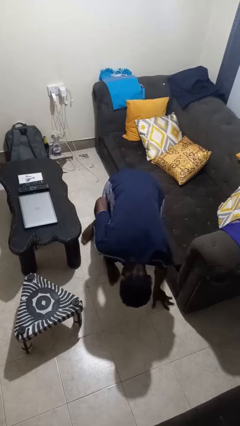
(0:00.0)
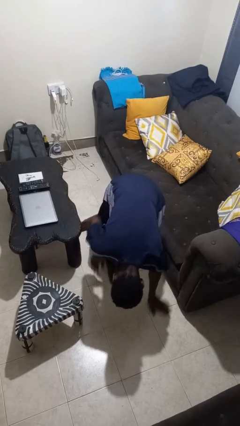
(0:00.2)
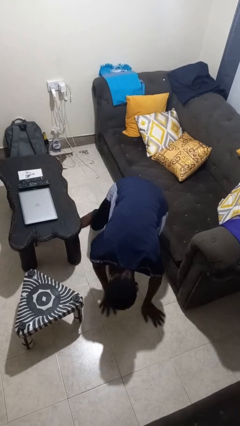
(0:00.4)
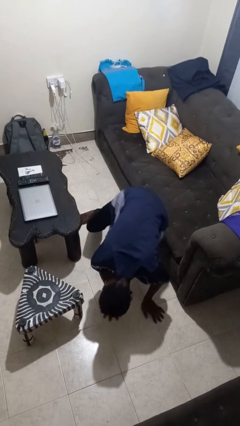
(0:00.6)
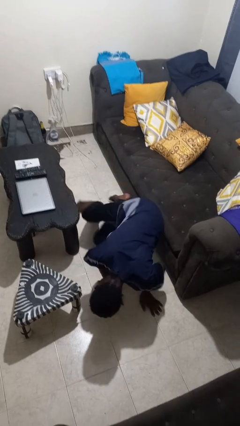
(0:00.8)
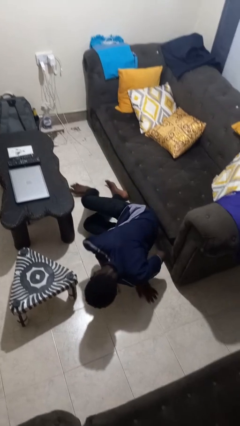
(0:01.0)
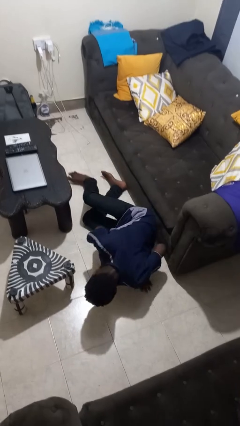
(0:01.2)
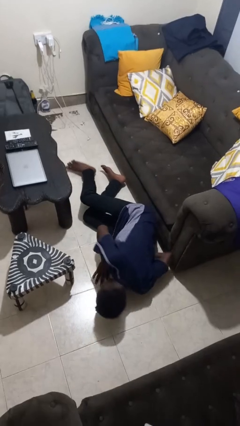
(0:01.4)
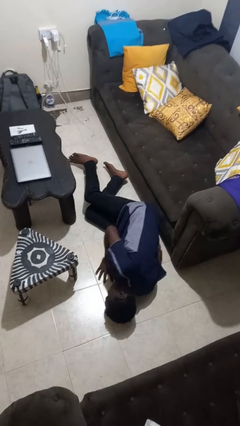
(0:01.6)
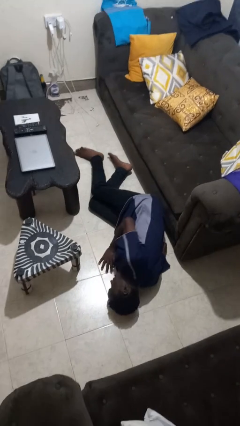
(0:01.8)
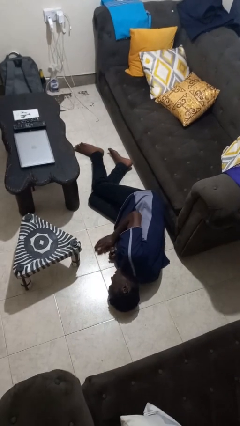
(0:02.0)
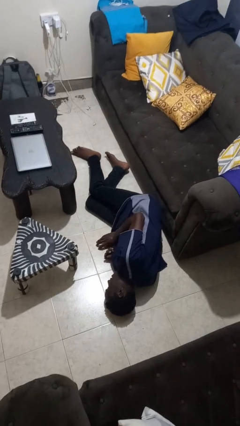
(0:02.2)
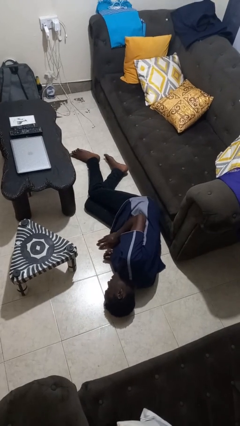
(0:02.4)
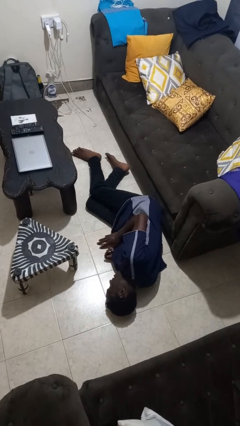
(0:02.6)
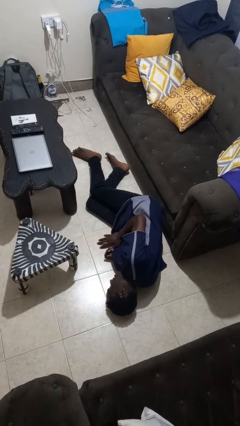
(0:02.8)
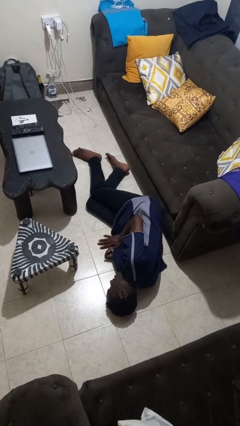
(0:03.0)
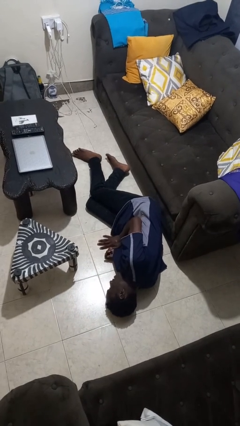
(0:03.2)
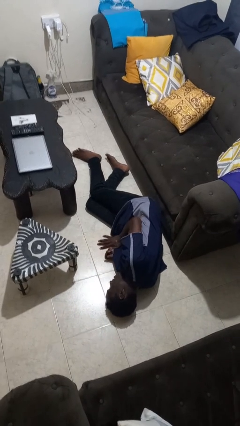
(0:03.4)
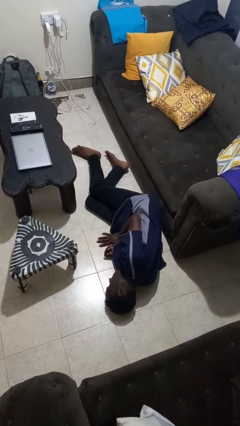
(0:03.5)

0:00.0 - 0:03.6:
person lies down on floor

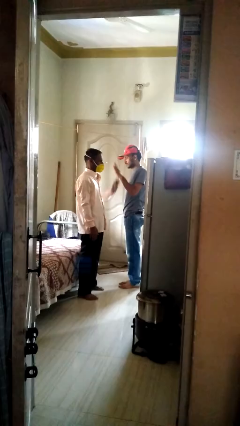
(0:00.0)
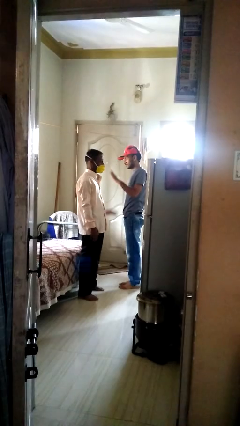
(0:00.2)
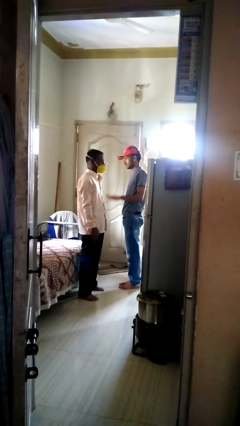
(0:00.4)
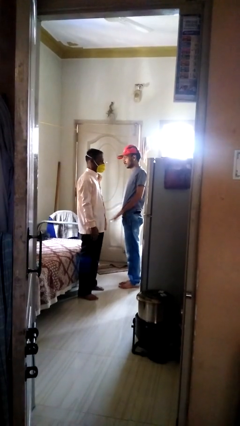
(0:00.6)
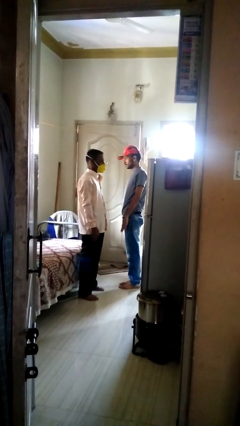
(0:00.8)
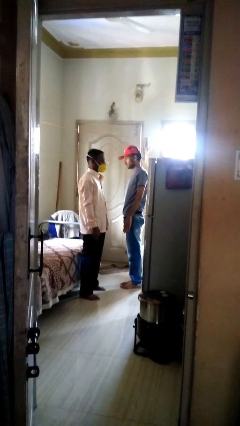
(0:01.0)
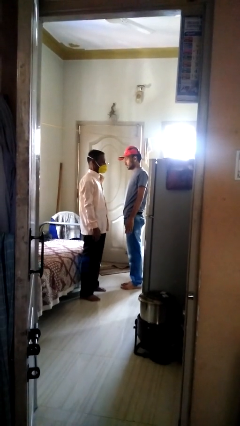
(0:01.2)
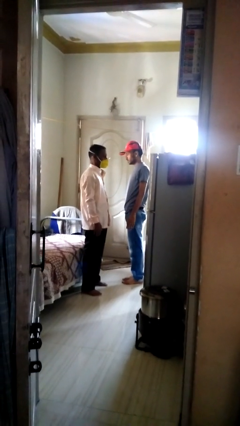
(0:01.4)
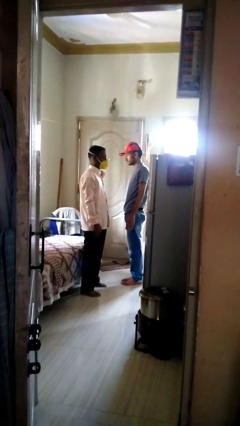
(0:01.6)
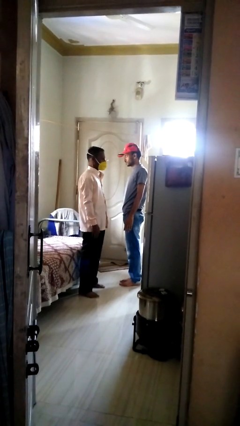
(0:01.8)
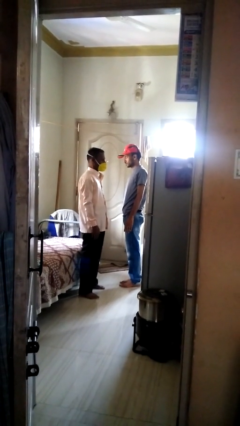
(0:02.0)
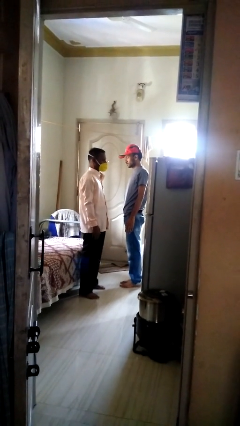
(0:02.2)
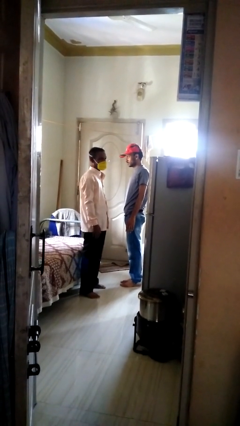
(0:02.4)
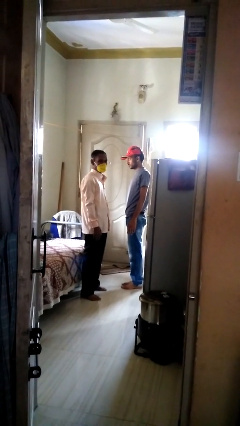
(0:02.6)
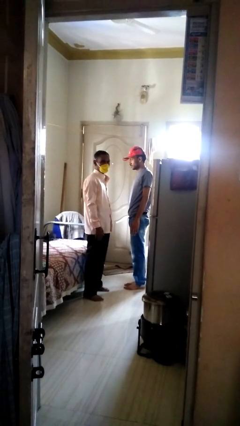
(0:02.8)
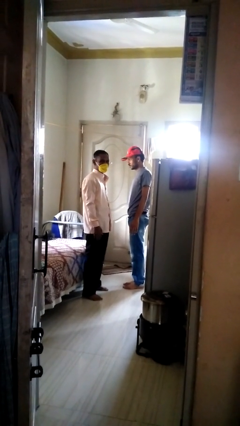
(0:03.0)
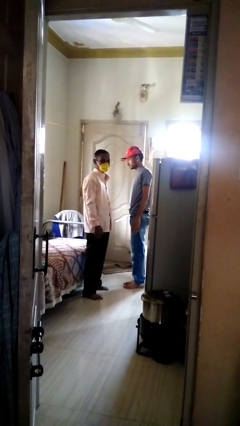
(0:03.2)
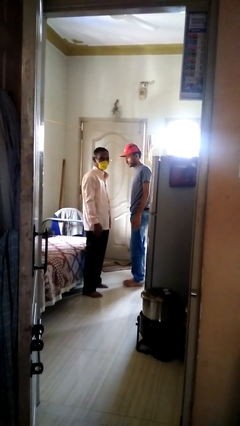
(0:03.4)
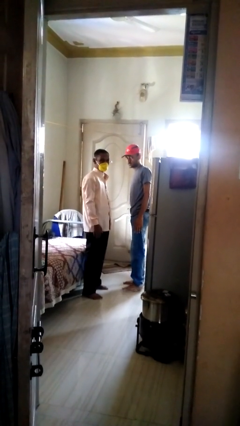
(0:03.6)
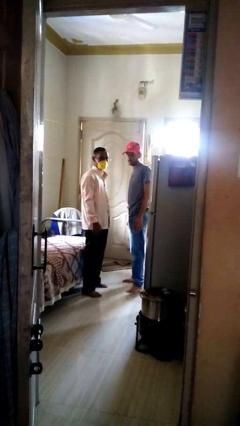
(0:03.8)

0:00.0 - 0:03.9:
person highfives hand

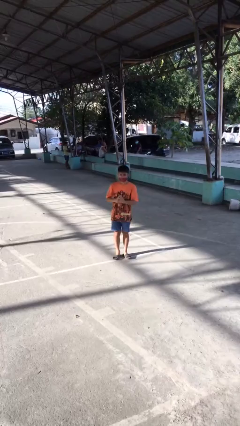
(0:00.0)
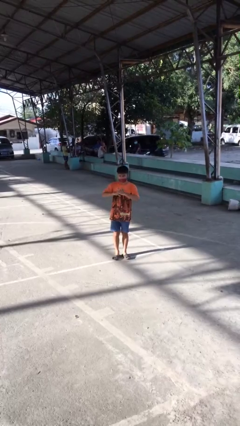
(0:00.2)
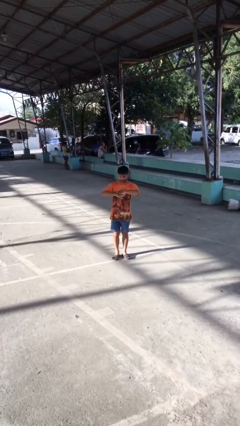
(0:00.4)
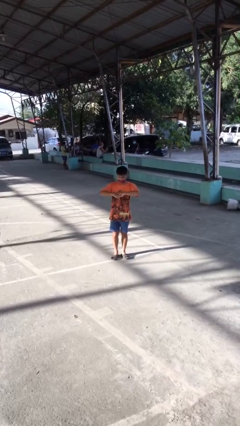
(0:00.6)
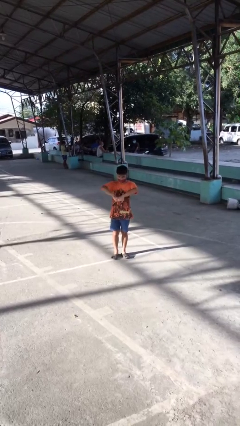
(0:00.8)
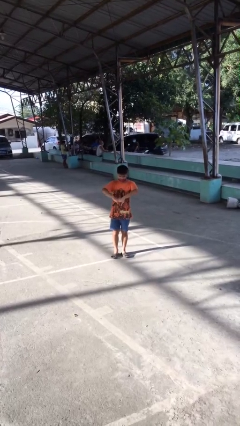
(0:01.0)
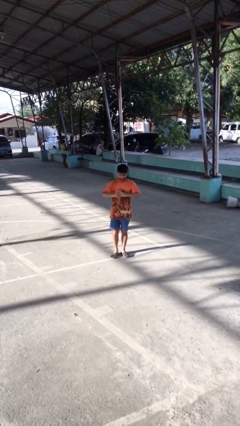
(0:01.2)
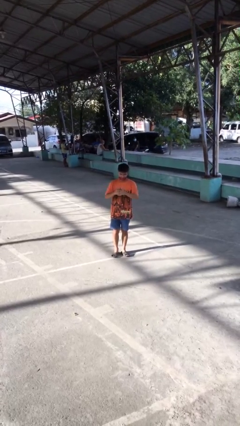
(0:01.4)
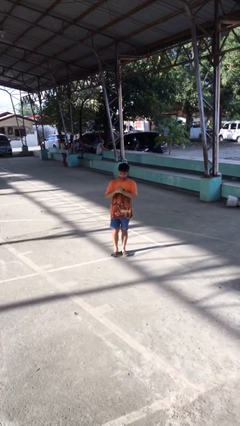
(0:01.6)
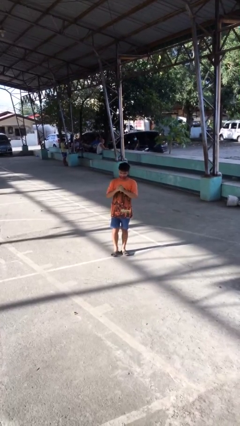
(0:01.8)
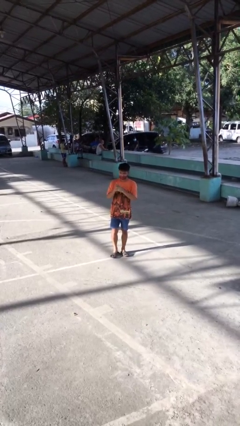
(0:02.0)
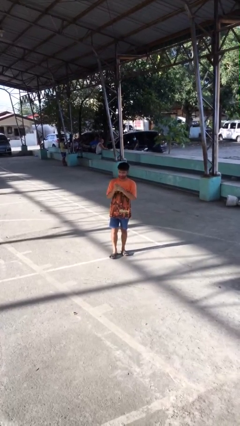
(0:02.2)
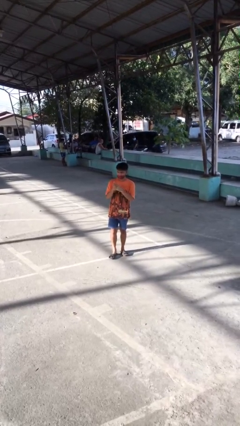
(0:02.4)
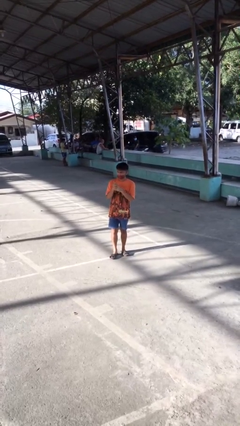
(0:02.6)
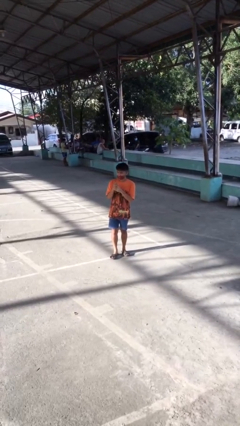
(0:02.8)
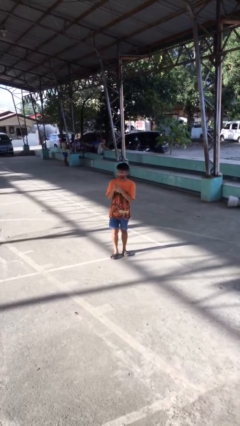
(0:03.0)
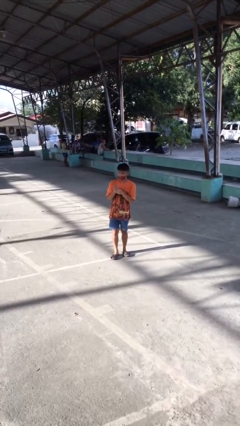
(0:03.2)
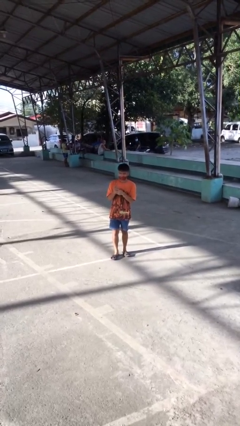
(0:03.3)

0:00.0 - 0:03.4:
person cracks knuckles

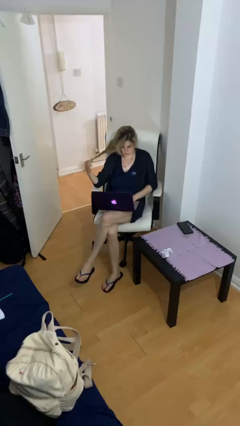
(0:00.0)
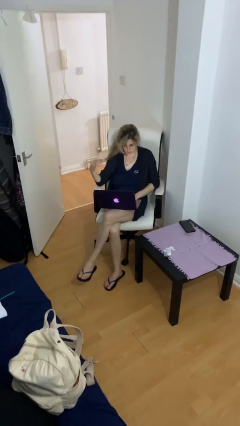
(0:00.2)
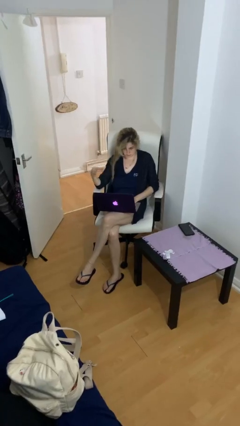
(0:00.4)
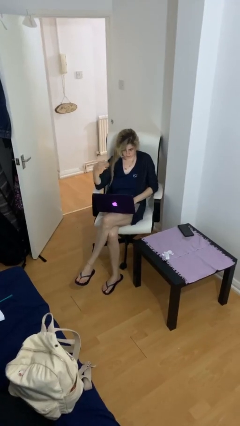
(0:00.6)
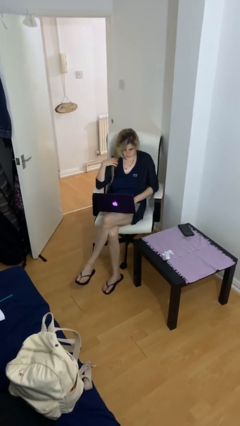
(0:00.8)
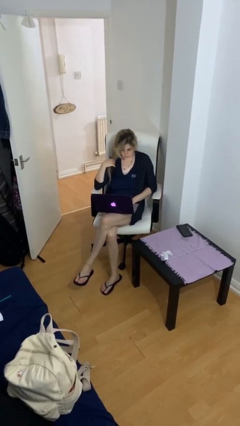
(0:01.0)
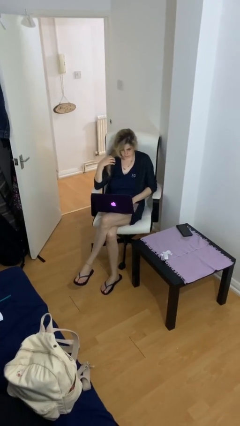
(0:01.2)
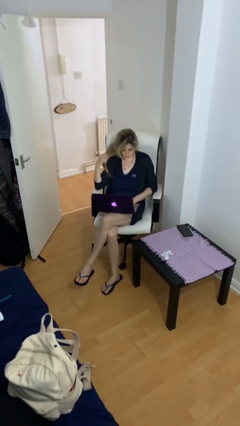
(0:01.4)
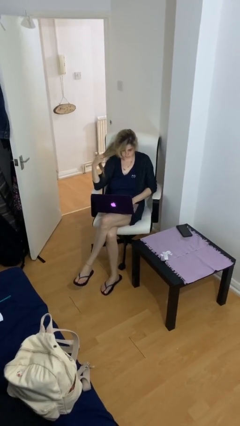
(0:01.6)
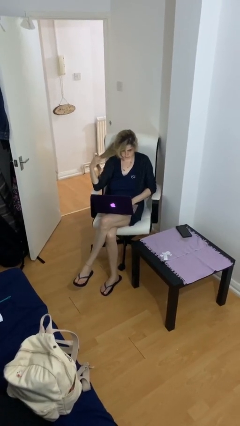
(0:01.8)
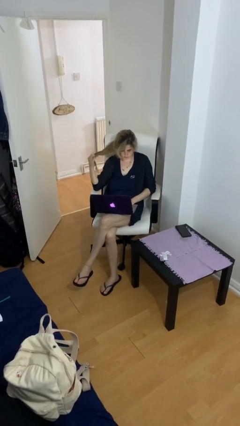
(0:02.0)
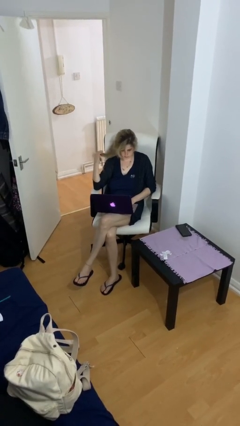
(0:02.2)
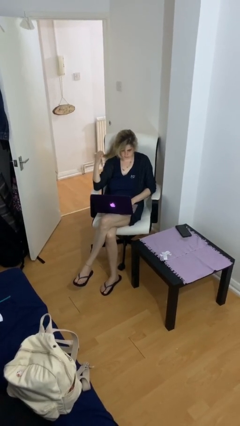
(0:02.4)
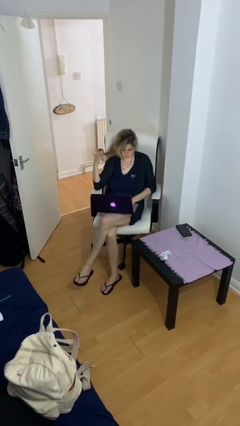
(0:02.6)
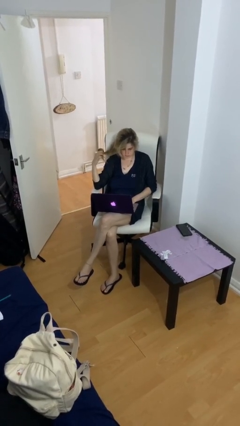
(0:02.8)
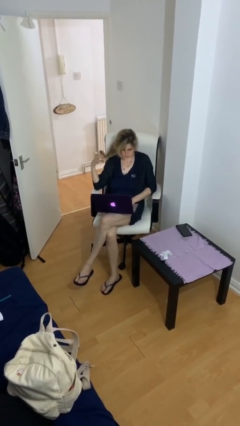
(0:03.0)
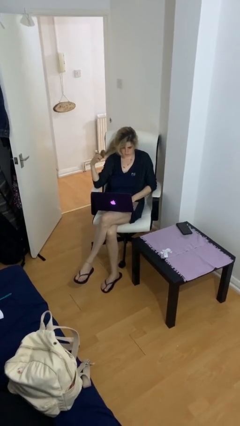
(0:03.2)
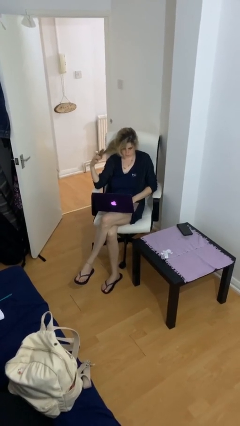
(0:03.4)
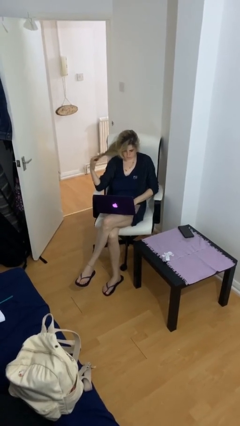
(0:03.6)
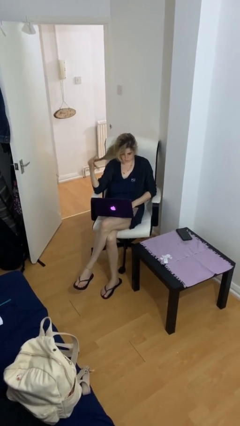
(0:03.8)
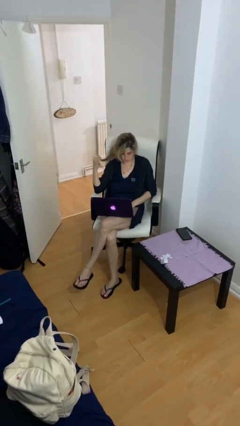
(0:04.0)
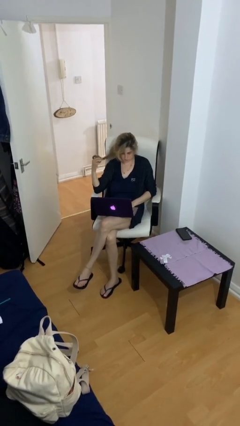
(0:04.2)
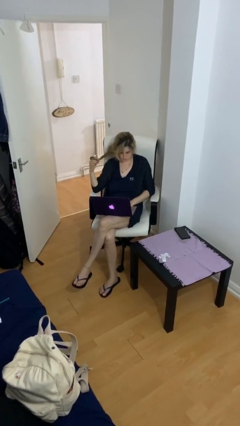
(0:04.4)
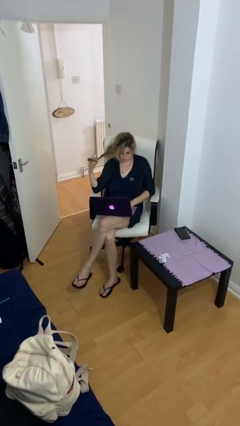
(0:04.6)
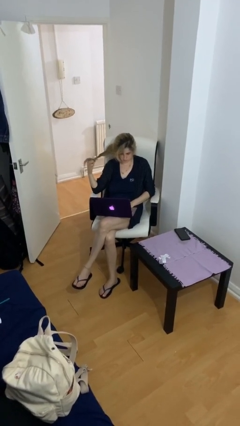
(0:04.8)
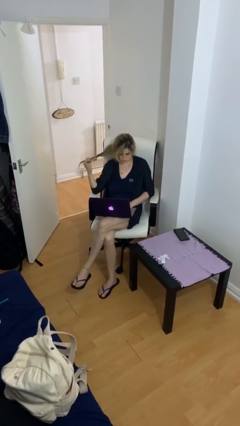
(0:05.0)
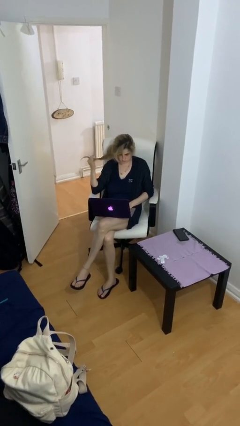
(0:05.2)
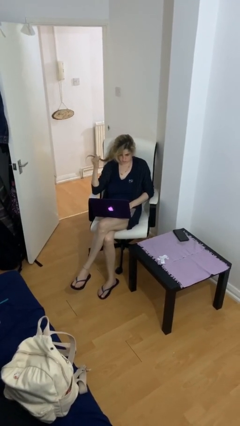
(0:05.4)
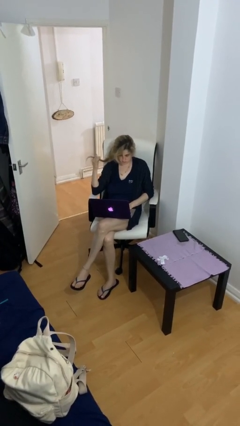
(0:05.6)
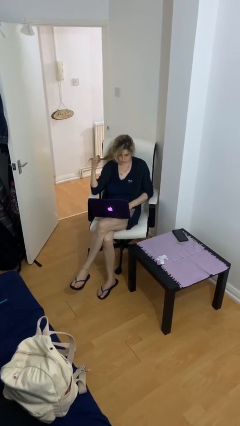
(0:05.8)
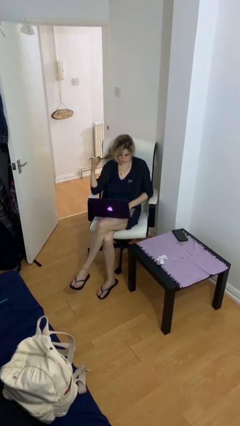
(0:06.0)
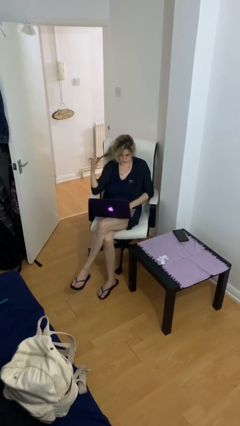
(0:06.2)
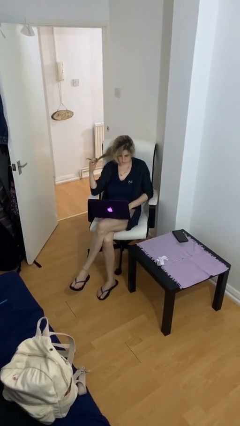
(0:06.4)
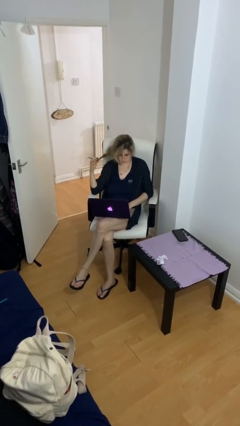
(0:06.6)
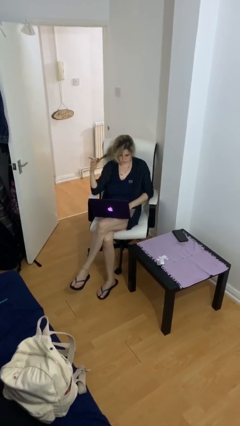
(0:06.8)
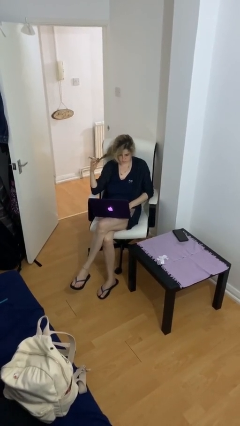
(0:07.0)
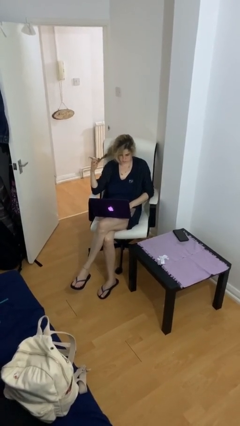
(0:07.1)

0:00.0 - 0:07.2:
person interacts with laptop
